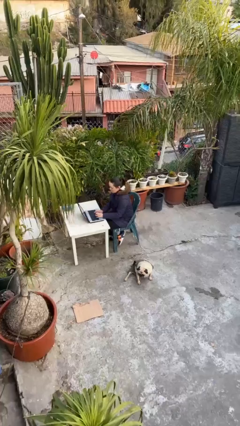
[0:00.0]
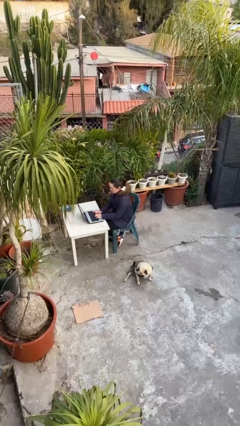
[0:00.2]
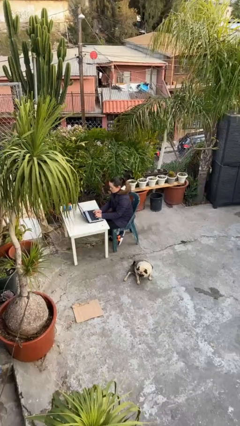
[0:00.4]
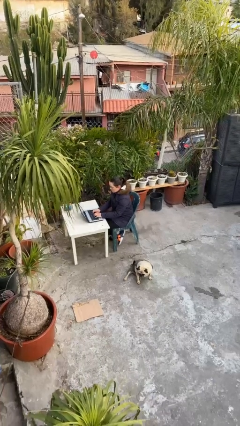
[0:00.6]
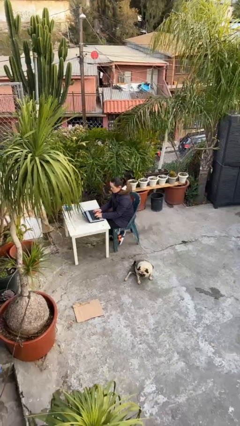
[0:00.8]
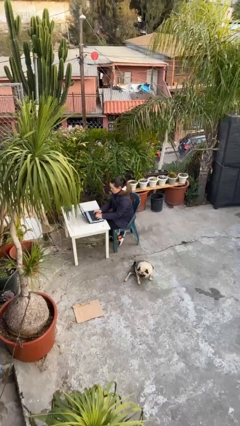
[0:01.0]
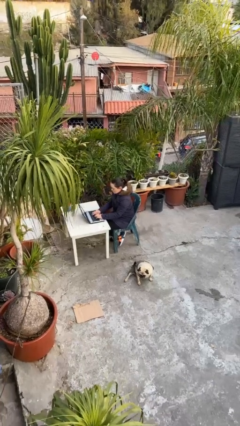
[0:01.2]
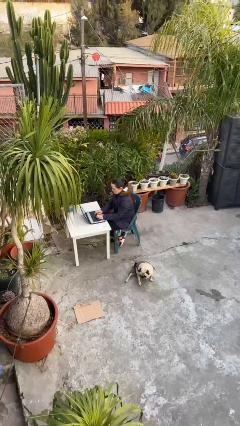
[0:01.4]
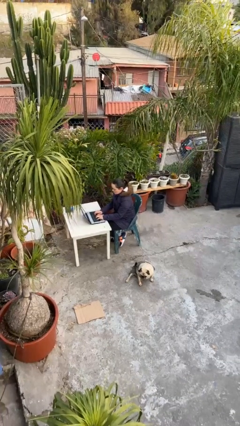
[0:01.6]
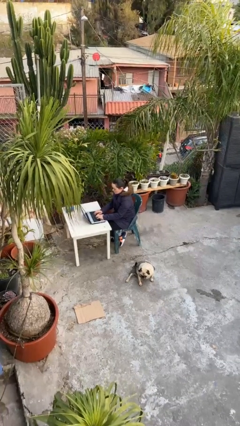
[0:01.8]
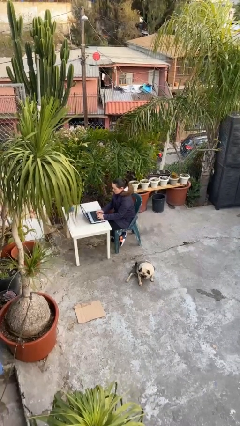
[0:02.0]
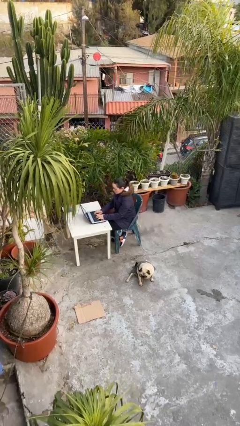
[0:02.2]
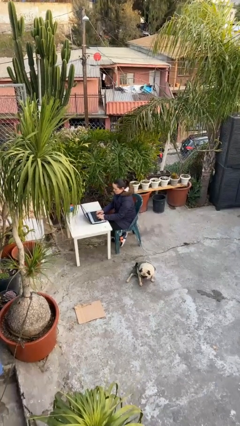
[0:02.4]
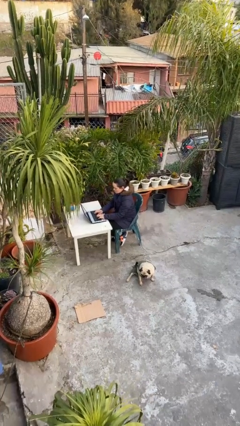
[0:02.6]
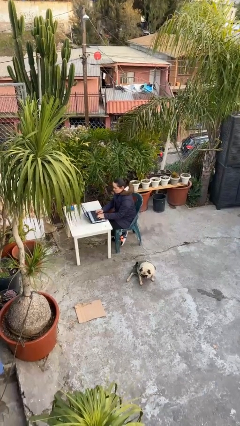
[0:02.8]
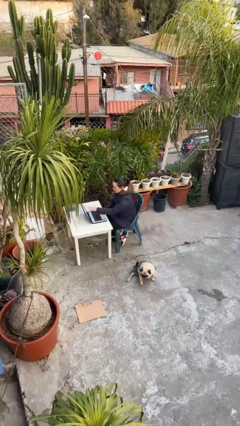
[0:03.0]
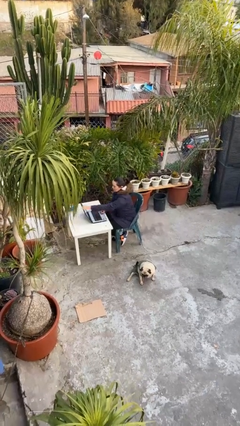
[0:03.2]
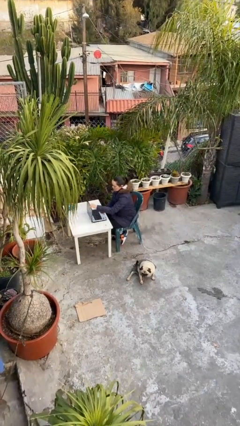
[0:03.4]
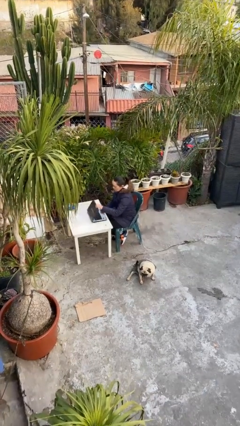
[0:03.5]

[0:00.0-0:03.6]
person interacts with laptop

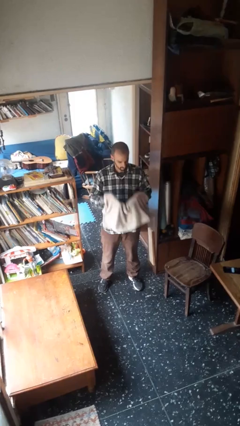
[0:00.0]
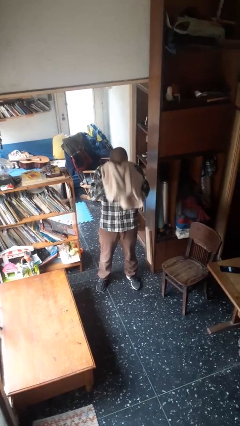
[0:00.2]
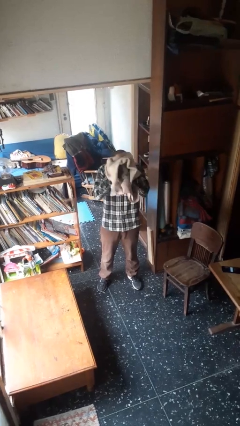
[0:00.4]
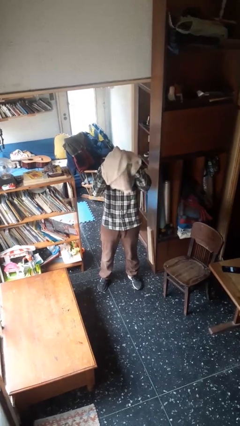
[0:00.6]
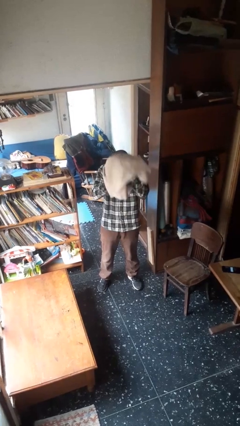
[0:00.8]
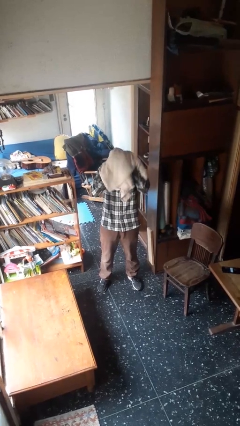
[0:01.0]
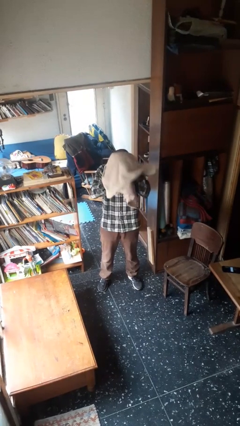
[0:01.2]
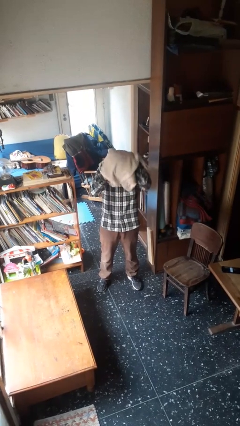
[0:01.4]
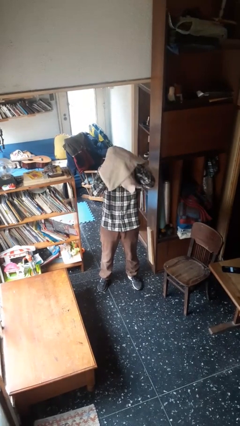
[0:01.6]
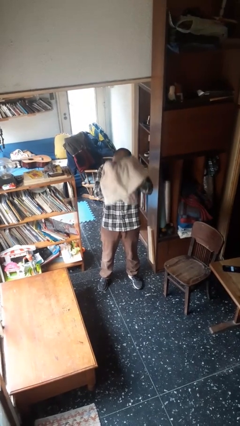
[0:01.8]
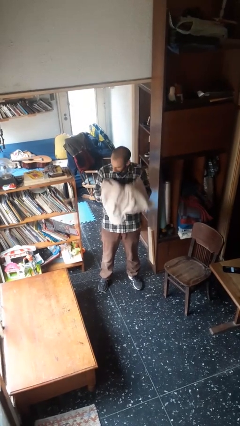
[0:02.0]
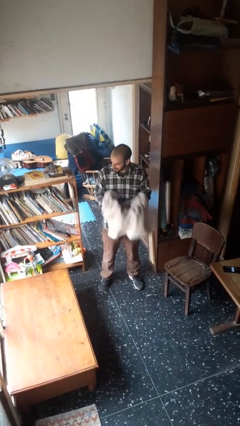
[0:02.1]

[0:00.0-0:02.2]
person dries hair with towel

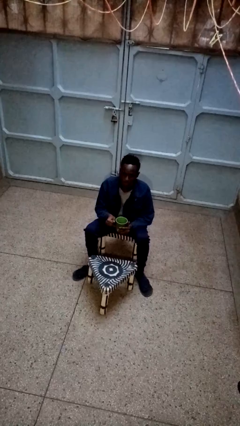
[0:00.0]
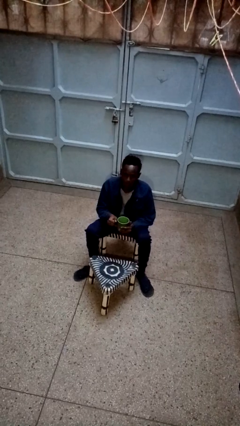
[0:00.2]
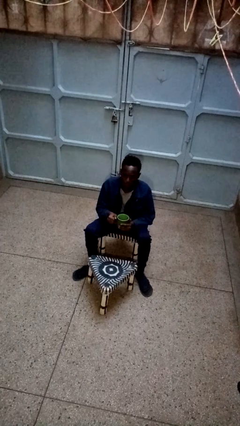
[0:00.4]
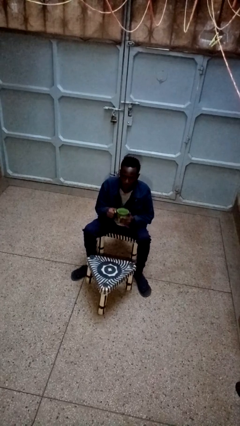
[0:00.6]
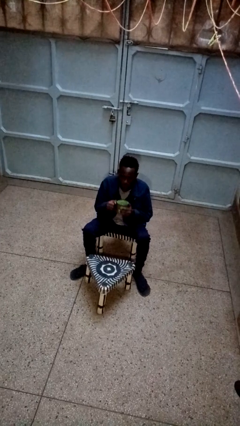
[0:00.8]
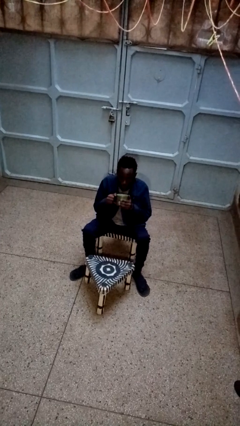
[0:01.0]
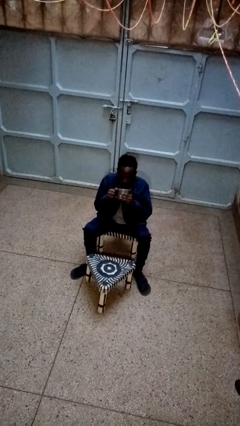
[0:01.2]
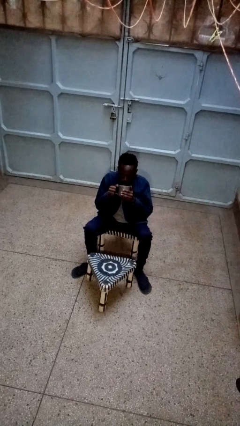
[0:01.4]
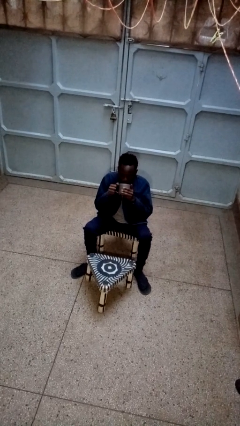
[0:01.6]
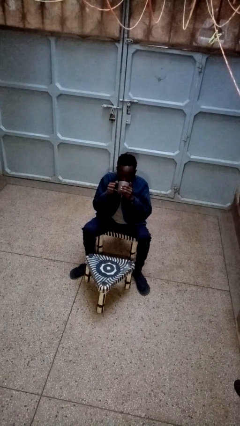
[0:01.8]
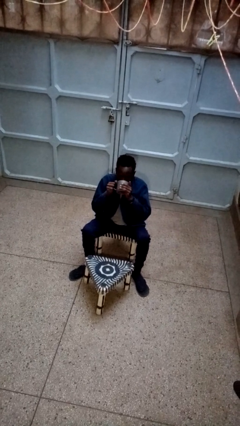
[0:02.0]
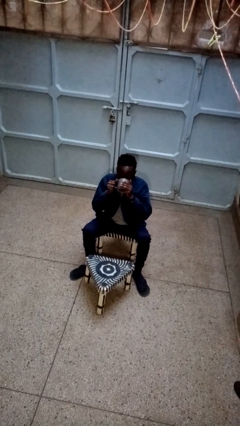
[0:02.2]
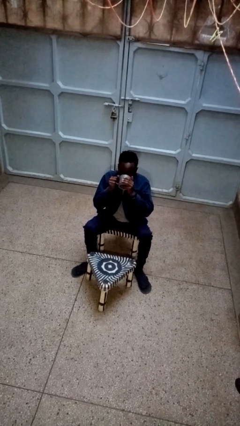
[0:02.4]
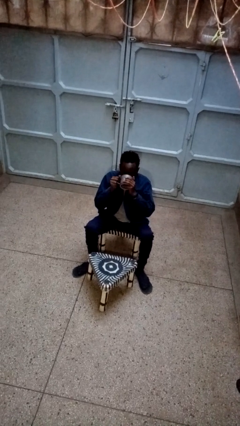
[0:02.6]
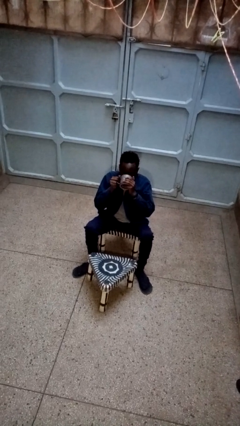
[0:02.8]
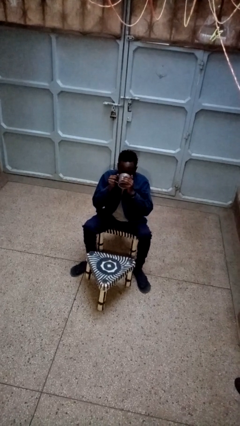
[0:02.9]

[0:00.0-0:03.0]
person drinks from mug

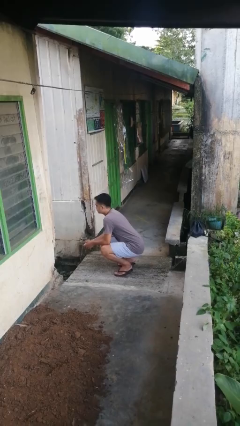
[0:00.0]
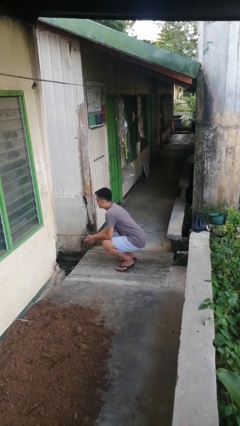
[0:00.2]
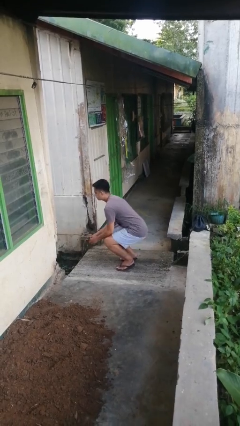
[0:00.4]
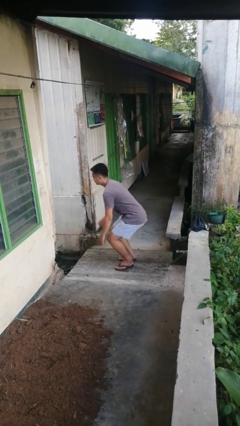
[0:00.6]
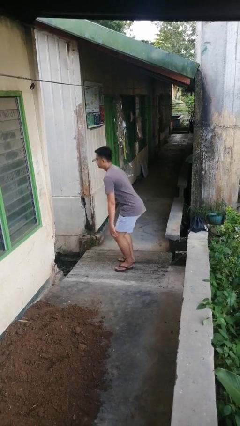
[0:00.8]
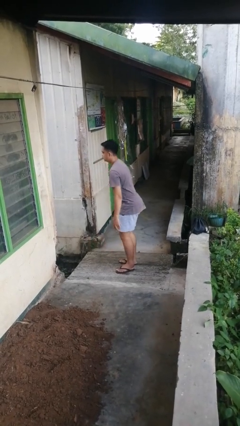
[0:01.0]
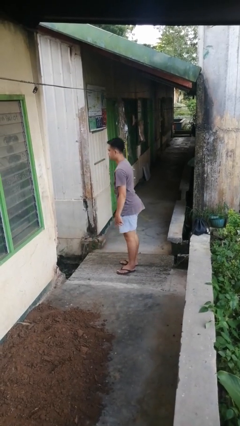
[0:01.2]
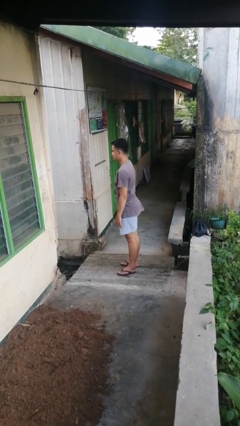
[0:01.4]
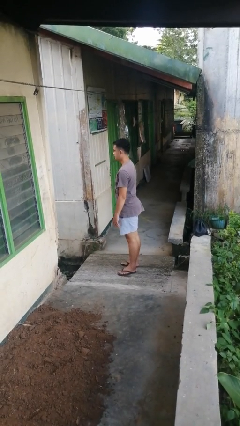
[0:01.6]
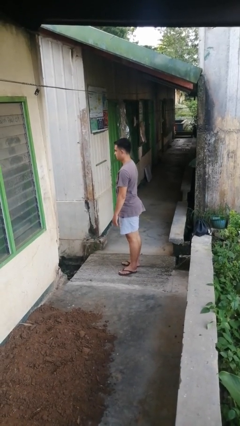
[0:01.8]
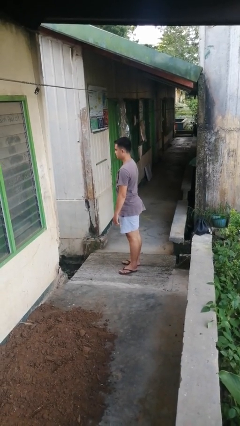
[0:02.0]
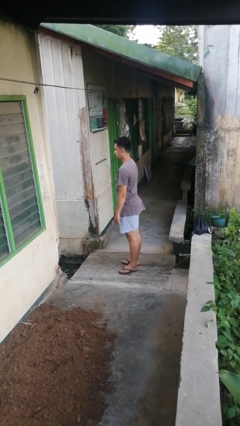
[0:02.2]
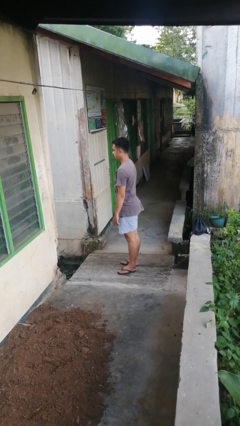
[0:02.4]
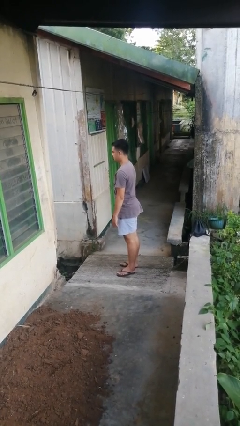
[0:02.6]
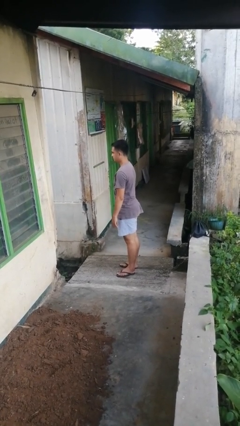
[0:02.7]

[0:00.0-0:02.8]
person stands up

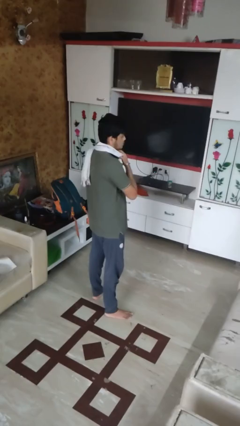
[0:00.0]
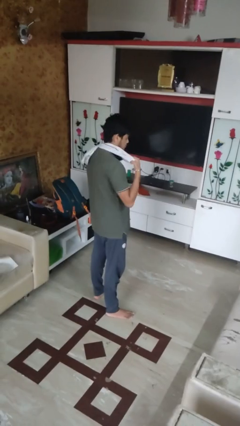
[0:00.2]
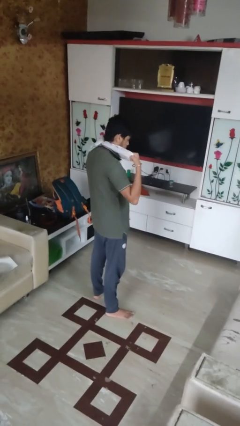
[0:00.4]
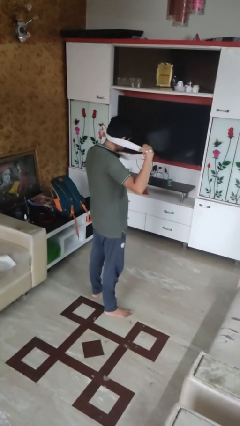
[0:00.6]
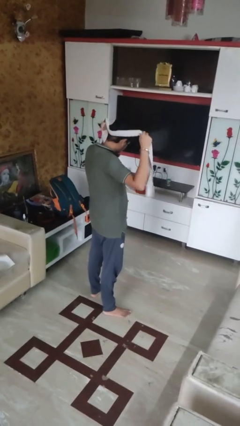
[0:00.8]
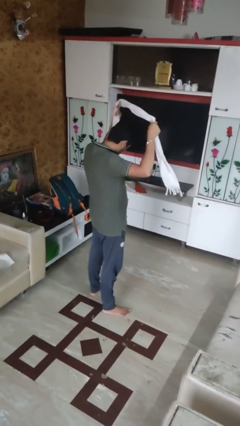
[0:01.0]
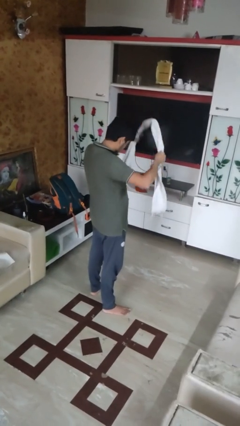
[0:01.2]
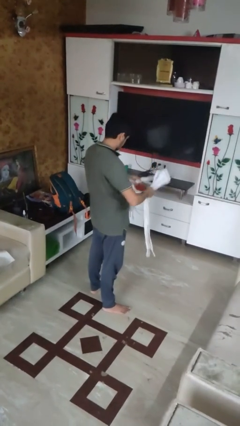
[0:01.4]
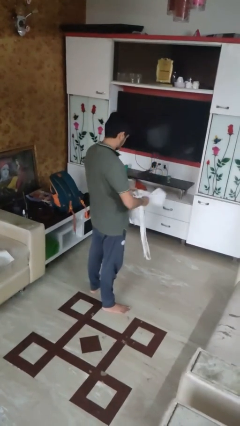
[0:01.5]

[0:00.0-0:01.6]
person takes off scarf

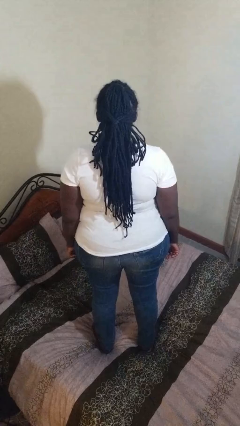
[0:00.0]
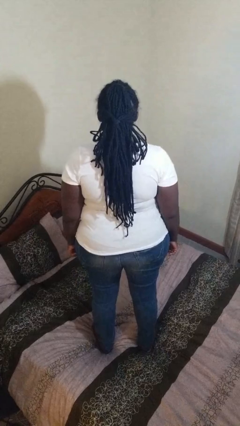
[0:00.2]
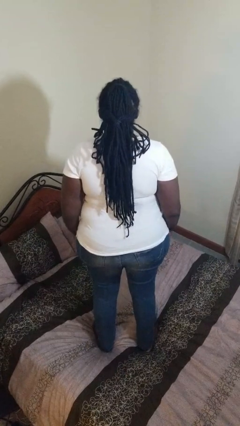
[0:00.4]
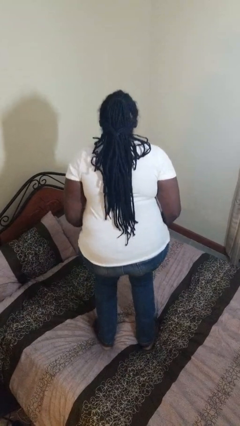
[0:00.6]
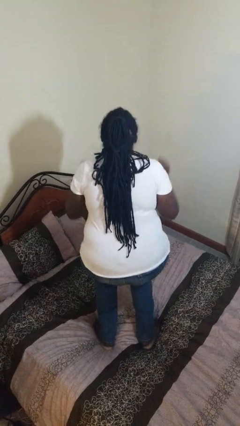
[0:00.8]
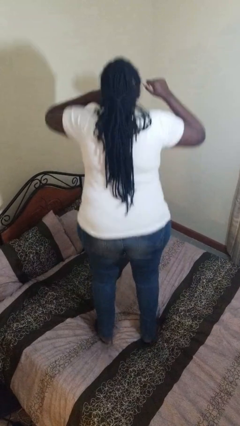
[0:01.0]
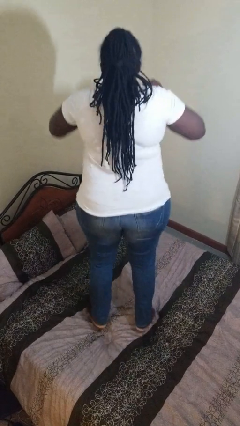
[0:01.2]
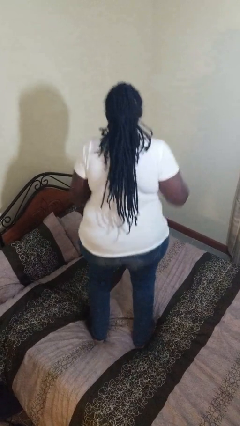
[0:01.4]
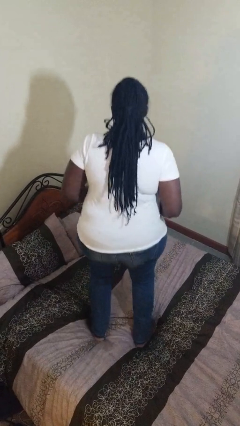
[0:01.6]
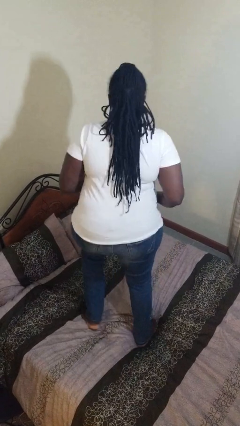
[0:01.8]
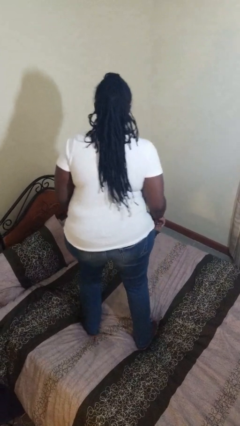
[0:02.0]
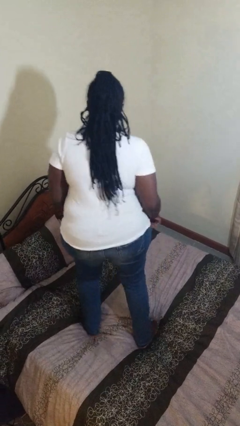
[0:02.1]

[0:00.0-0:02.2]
person jumps on bed

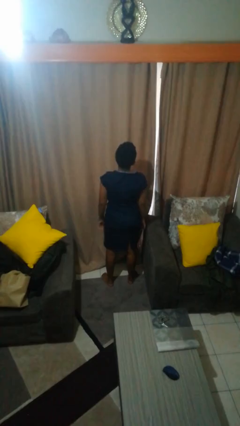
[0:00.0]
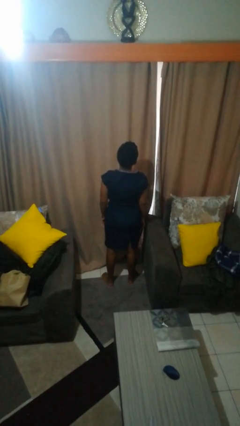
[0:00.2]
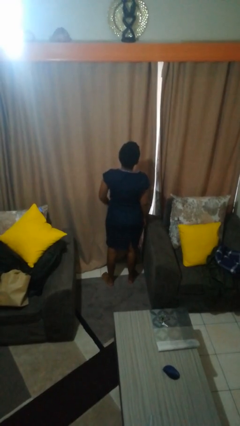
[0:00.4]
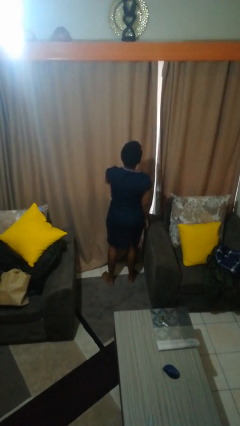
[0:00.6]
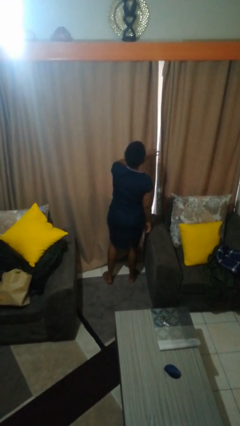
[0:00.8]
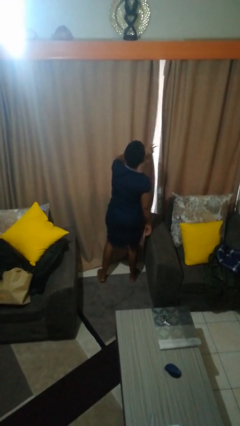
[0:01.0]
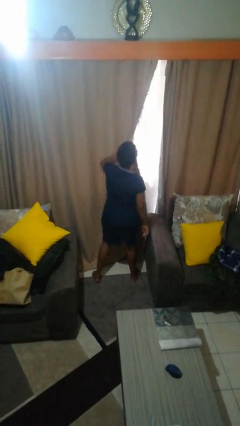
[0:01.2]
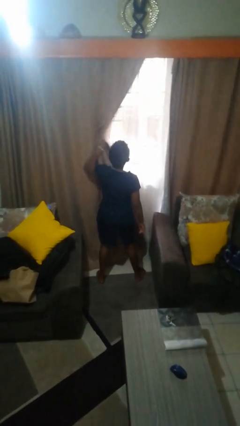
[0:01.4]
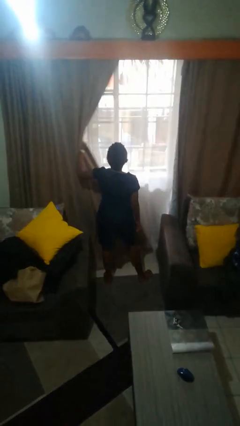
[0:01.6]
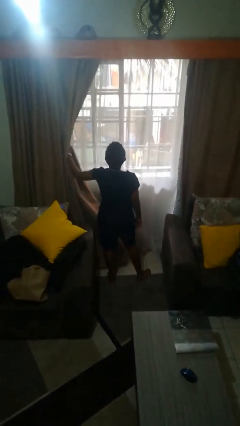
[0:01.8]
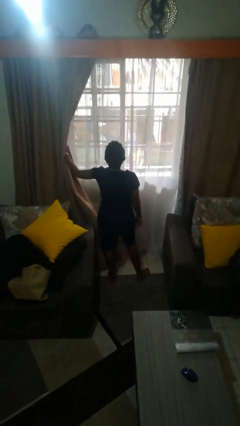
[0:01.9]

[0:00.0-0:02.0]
person opens curtains
